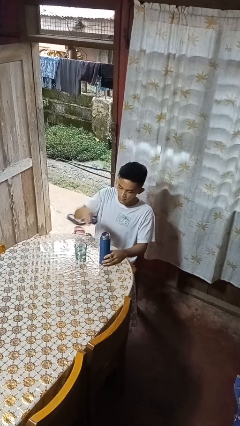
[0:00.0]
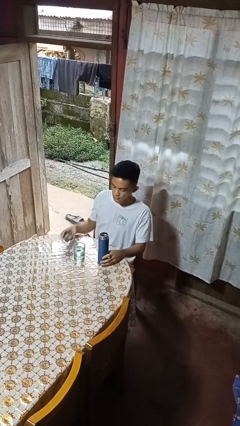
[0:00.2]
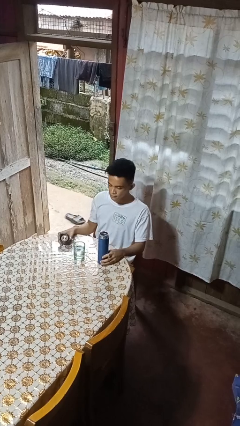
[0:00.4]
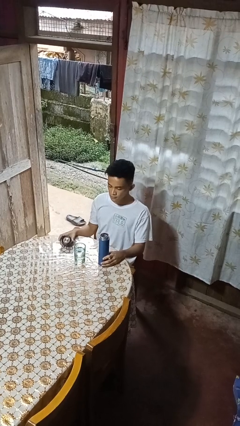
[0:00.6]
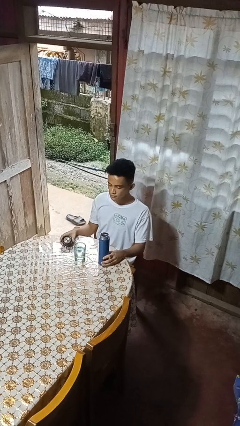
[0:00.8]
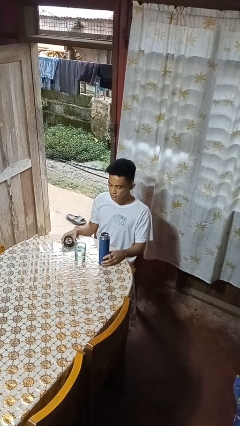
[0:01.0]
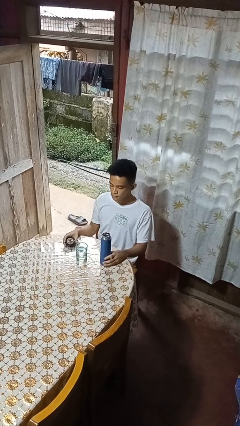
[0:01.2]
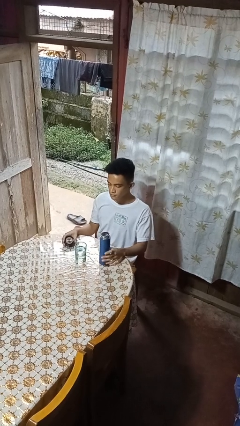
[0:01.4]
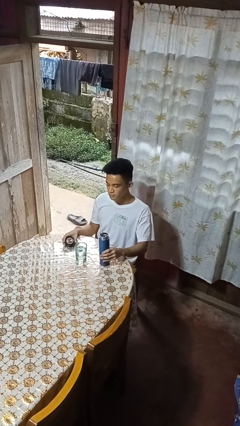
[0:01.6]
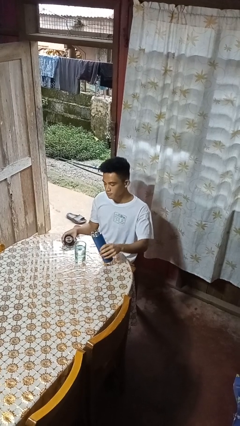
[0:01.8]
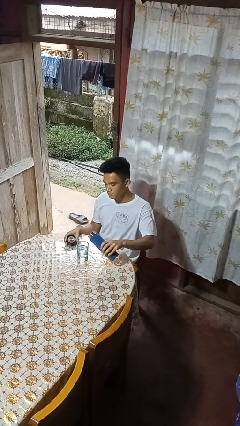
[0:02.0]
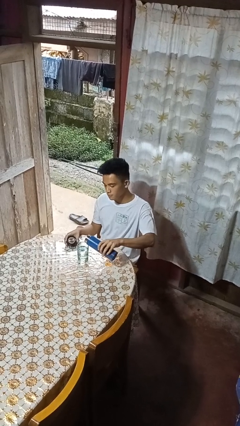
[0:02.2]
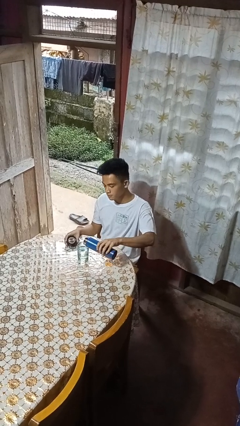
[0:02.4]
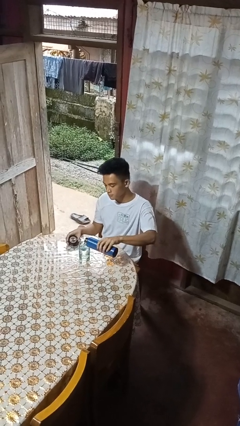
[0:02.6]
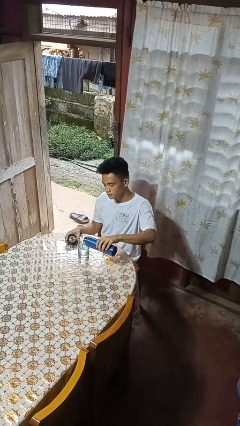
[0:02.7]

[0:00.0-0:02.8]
person unscrews lid from bottle

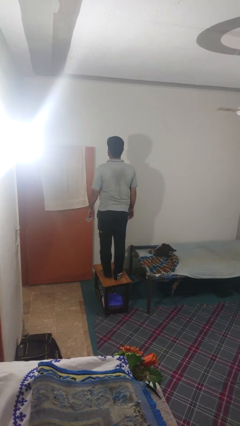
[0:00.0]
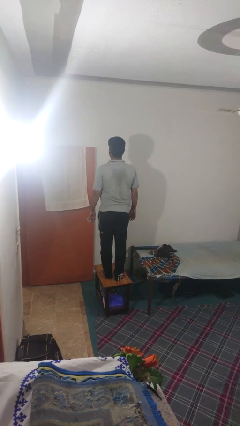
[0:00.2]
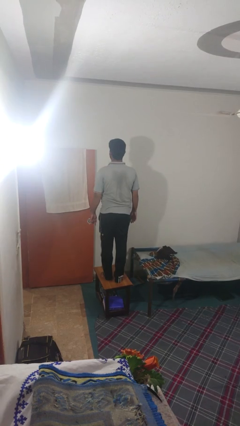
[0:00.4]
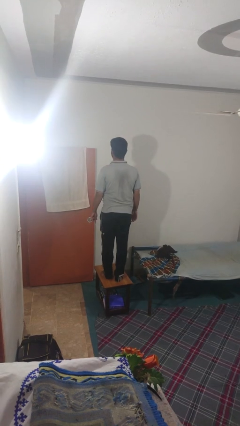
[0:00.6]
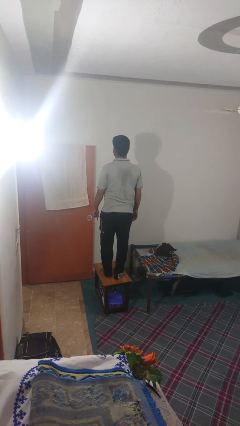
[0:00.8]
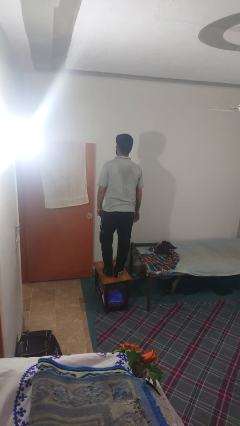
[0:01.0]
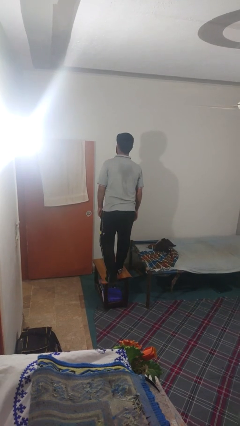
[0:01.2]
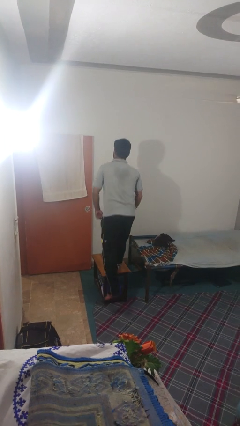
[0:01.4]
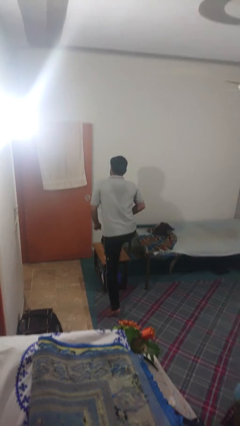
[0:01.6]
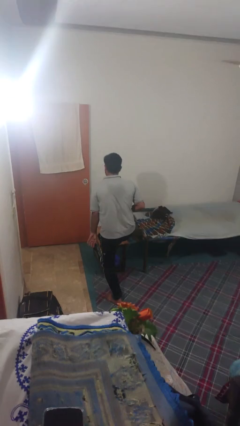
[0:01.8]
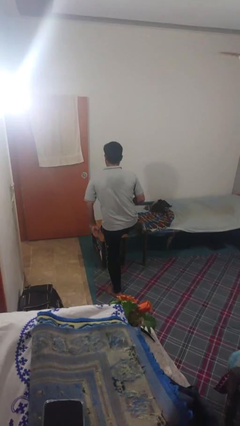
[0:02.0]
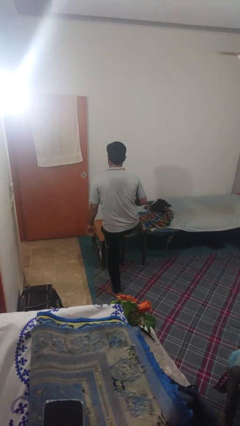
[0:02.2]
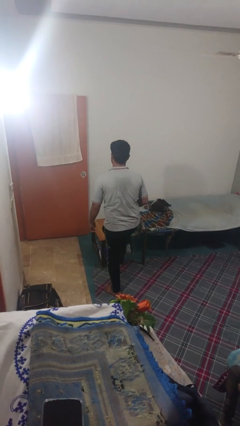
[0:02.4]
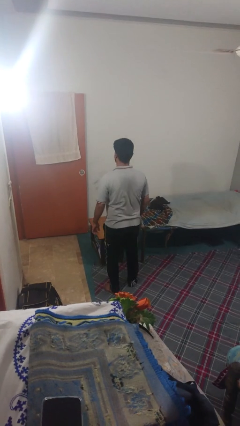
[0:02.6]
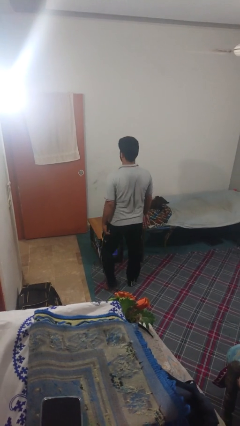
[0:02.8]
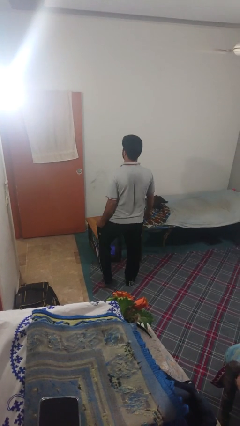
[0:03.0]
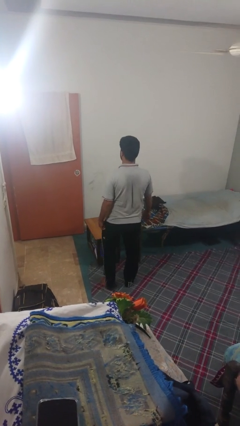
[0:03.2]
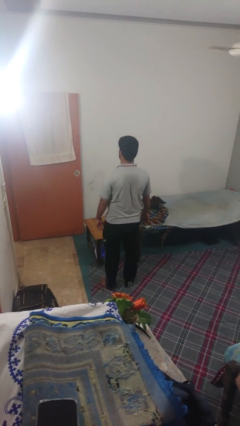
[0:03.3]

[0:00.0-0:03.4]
person climbs off table

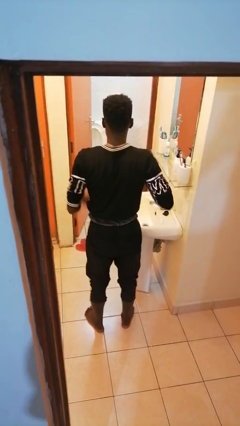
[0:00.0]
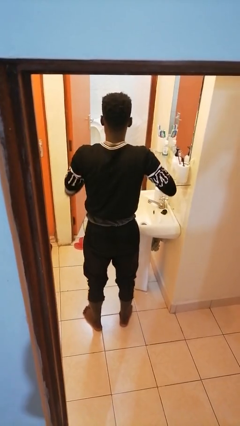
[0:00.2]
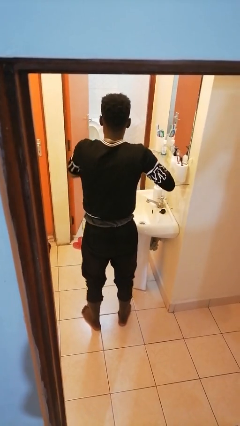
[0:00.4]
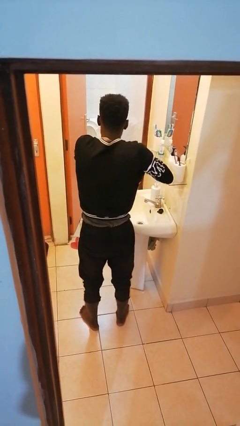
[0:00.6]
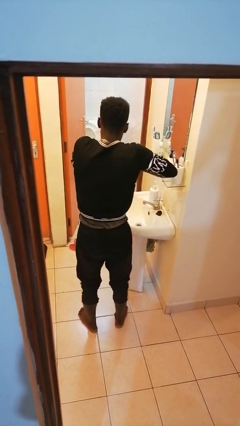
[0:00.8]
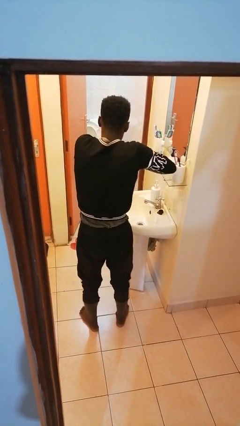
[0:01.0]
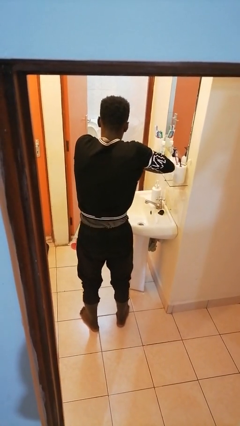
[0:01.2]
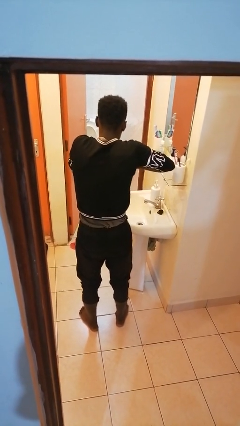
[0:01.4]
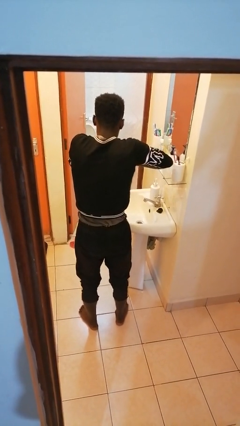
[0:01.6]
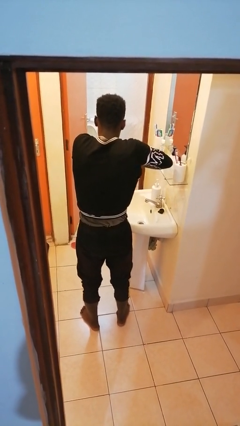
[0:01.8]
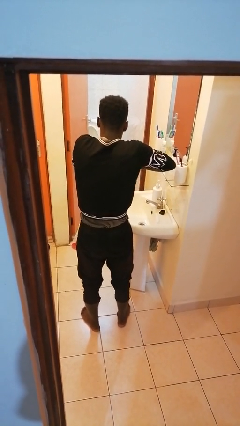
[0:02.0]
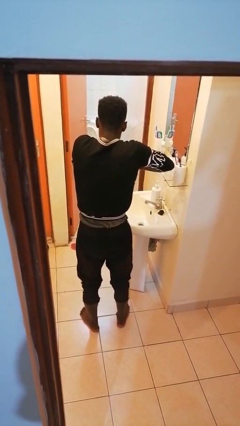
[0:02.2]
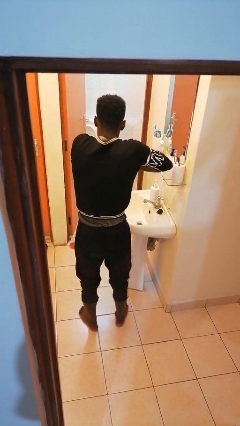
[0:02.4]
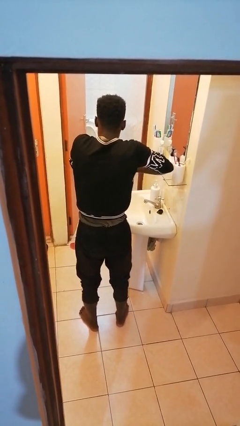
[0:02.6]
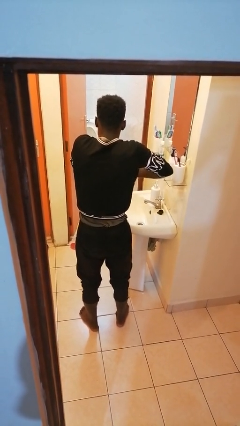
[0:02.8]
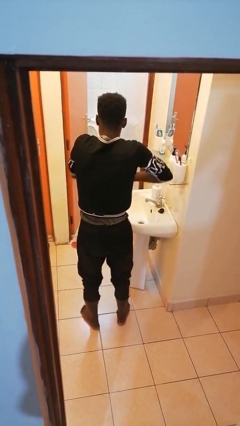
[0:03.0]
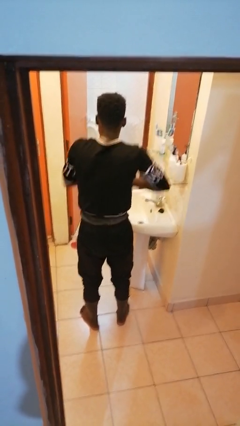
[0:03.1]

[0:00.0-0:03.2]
person applies deodorant

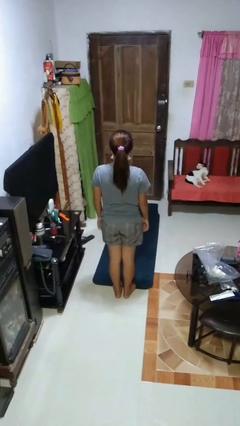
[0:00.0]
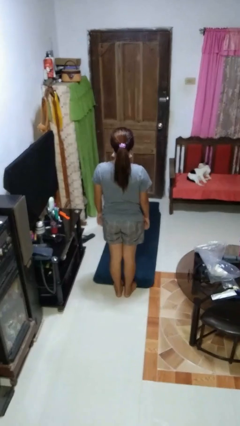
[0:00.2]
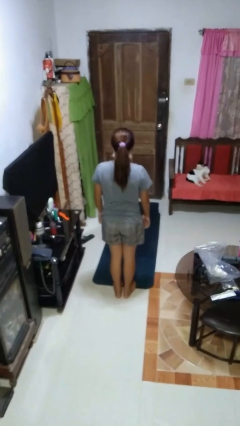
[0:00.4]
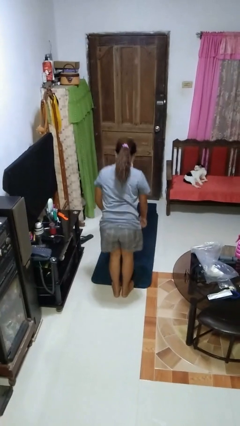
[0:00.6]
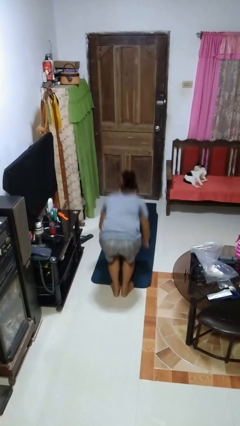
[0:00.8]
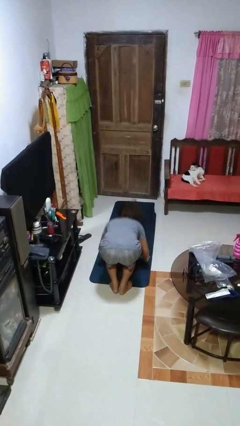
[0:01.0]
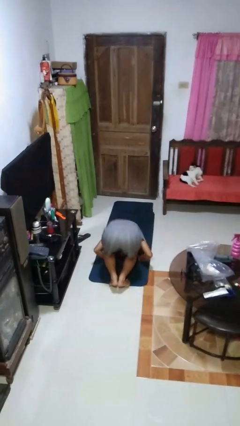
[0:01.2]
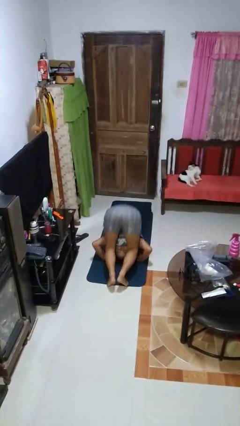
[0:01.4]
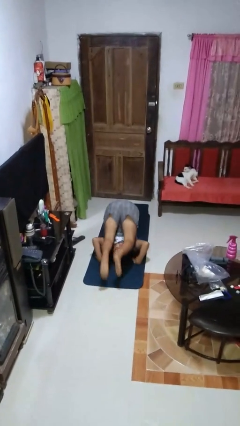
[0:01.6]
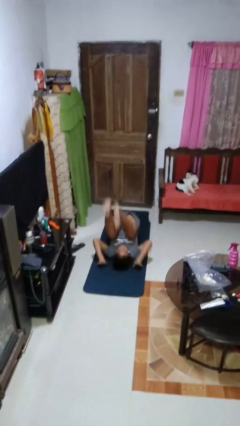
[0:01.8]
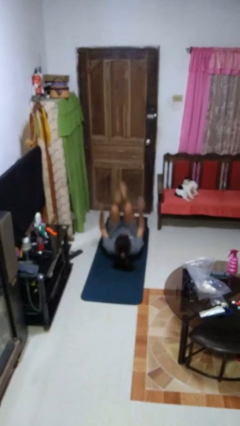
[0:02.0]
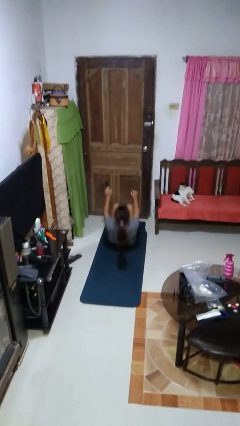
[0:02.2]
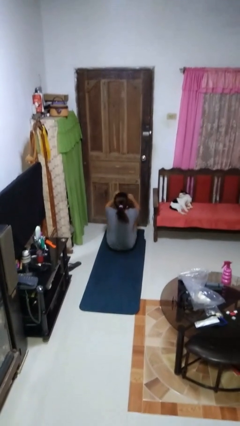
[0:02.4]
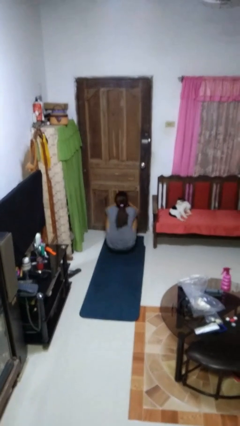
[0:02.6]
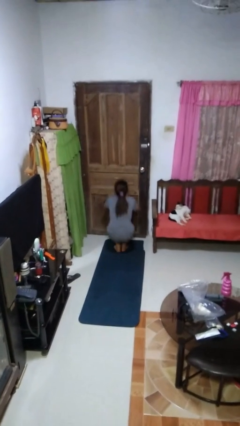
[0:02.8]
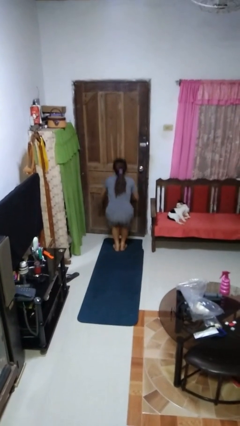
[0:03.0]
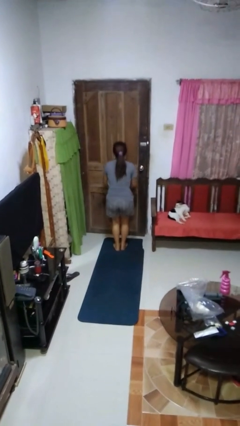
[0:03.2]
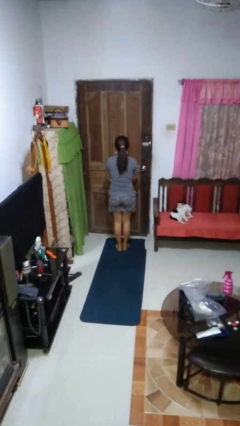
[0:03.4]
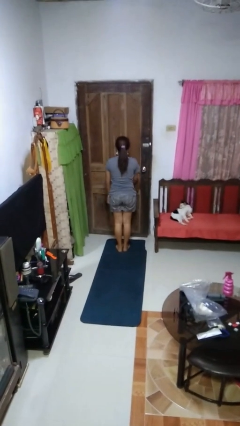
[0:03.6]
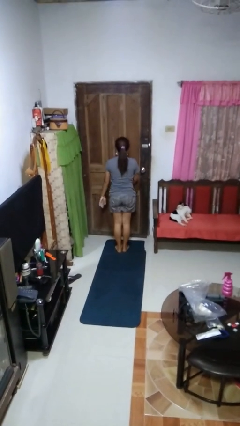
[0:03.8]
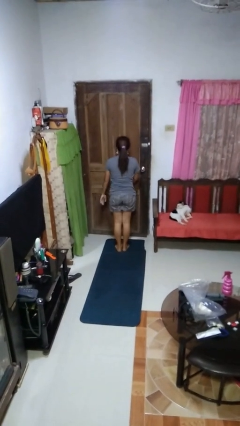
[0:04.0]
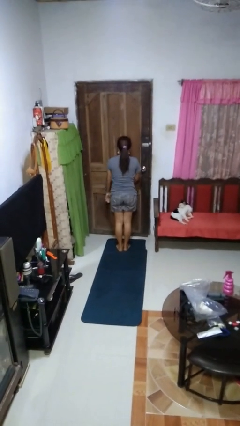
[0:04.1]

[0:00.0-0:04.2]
person somersaults

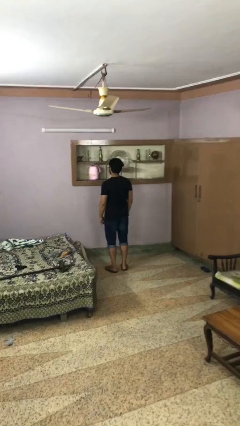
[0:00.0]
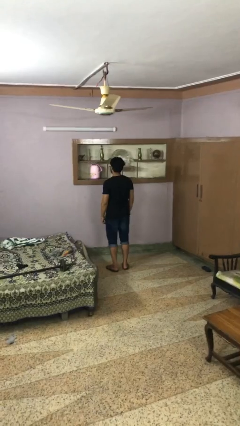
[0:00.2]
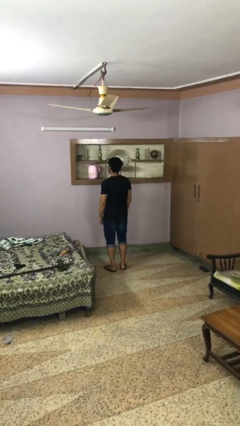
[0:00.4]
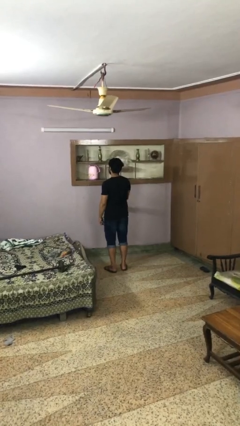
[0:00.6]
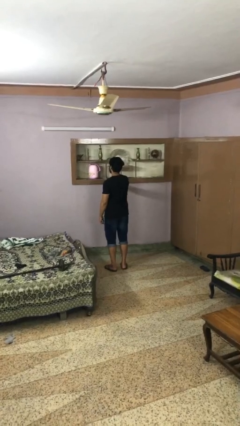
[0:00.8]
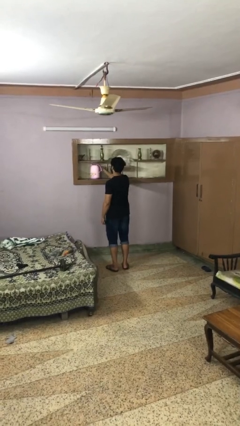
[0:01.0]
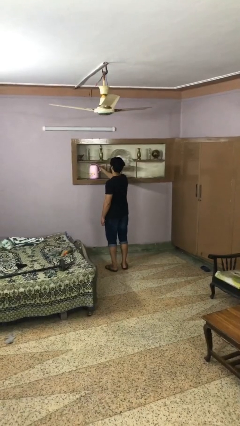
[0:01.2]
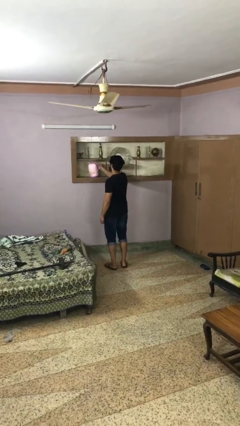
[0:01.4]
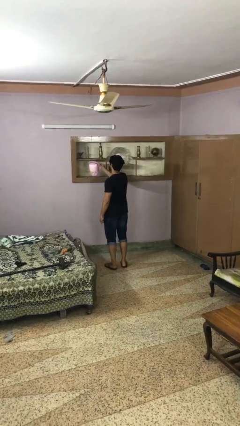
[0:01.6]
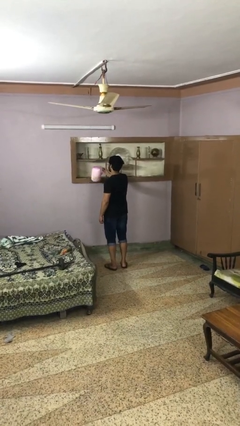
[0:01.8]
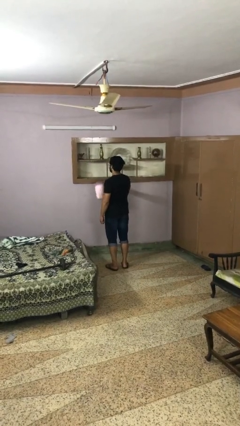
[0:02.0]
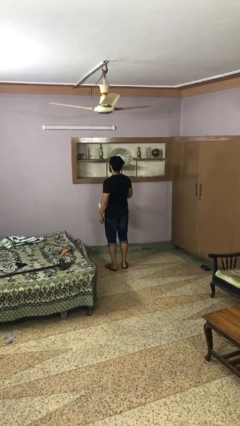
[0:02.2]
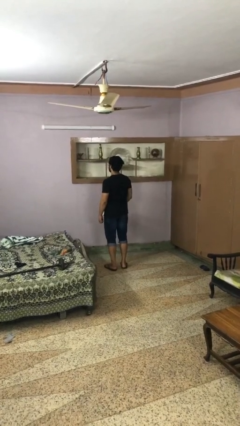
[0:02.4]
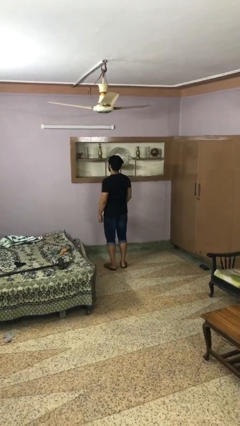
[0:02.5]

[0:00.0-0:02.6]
person picks up object from countertop

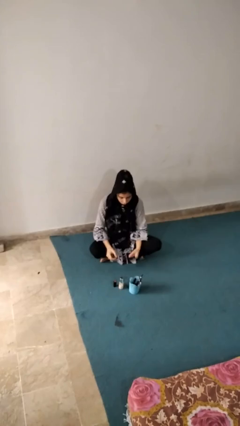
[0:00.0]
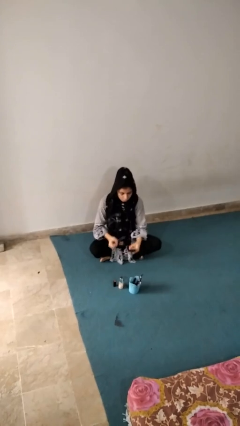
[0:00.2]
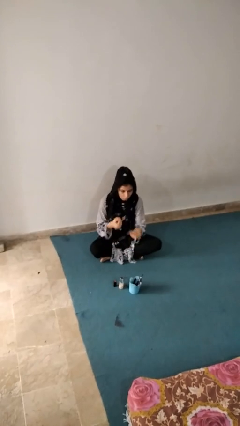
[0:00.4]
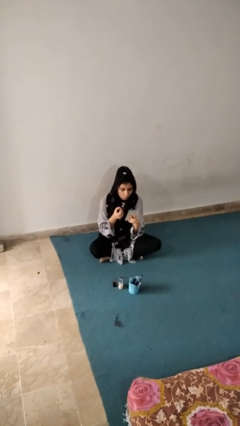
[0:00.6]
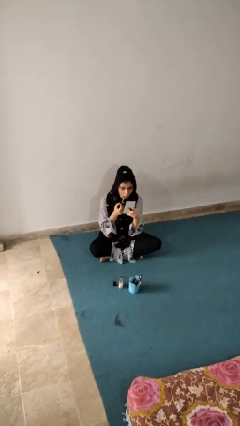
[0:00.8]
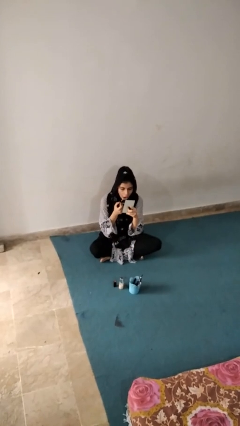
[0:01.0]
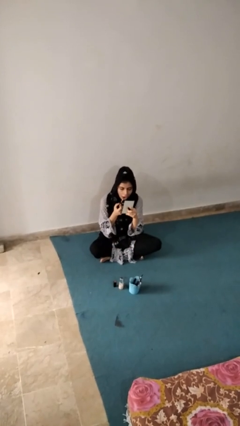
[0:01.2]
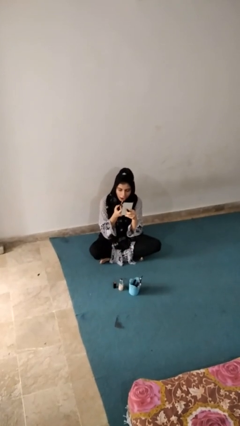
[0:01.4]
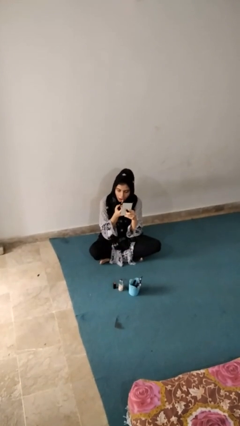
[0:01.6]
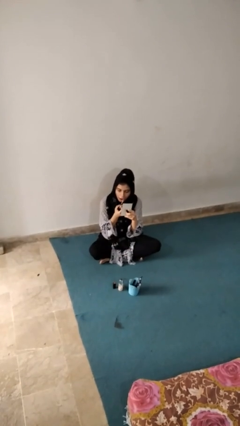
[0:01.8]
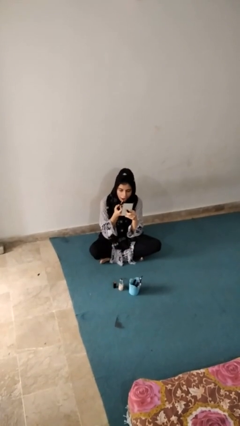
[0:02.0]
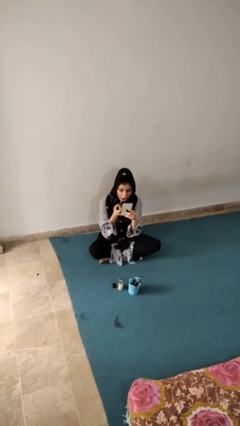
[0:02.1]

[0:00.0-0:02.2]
person applies lip makeup
